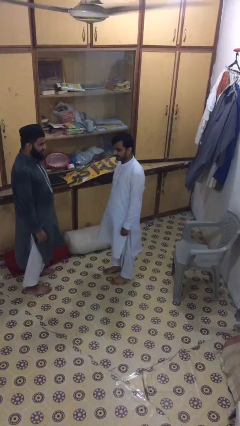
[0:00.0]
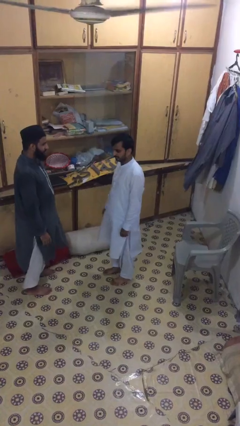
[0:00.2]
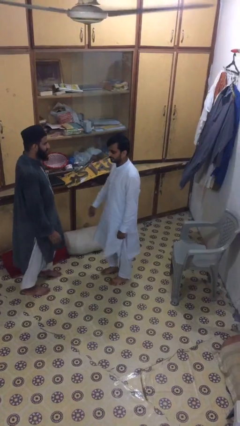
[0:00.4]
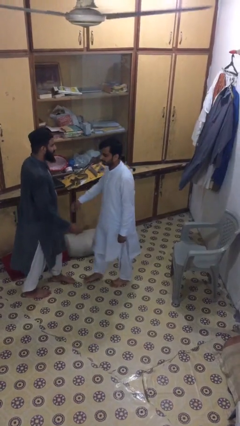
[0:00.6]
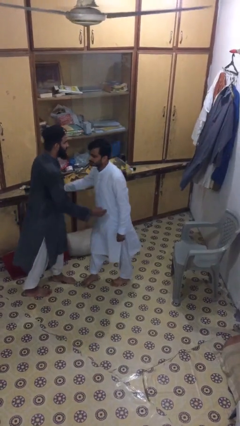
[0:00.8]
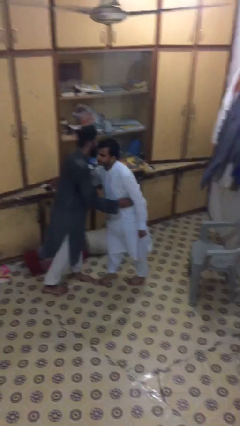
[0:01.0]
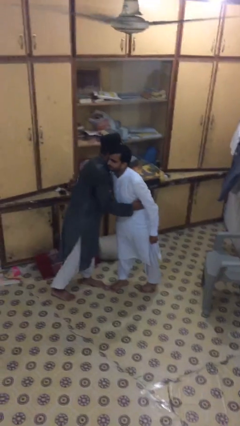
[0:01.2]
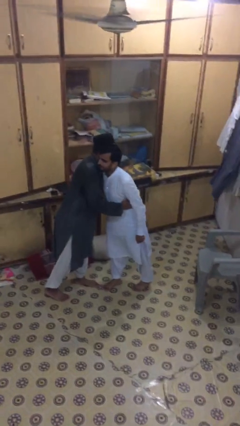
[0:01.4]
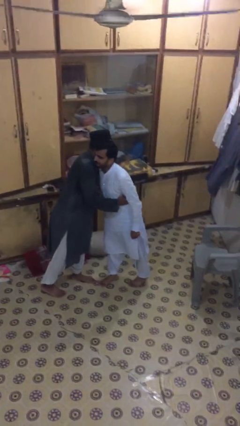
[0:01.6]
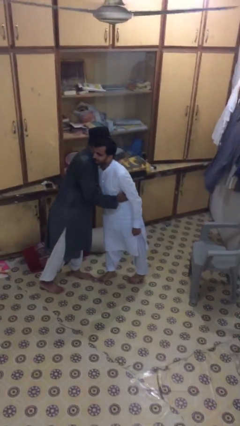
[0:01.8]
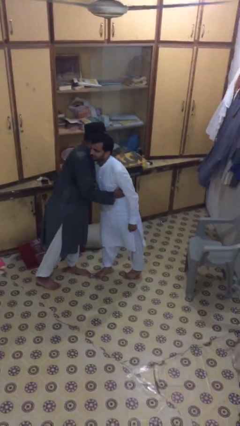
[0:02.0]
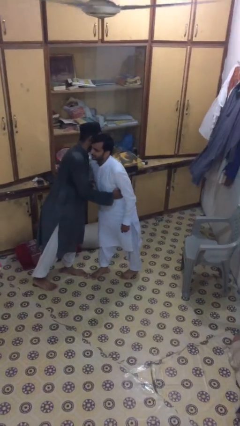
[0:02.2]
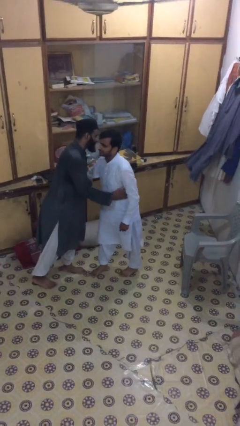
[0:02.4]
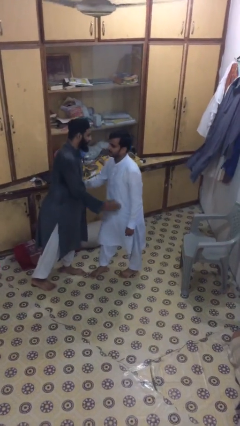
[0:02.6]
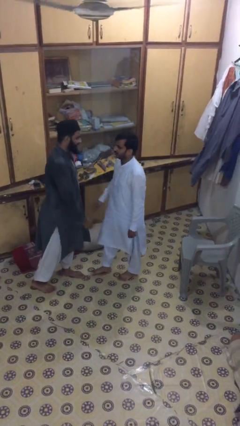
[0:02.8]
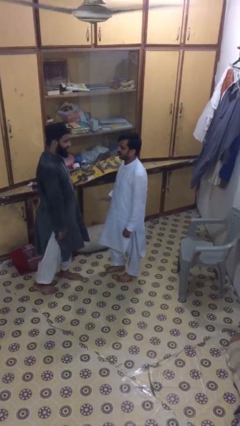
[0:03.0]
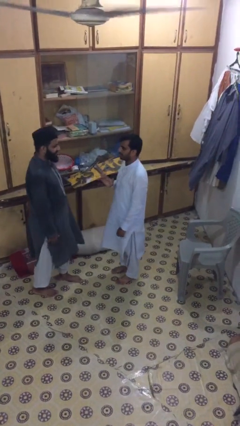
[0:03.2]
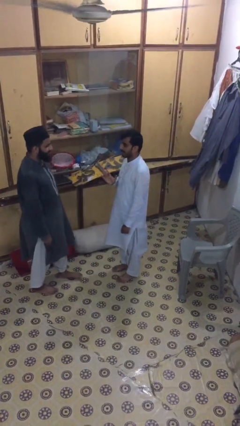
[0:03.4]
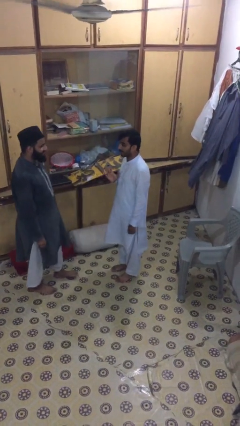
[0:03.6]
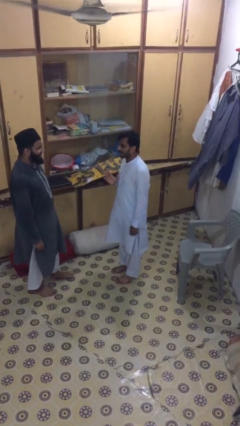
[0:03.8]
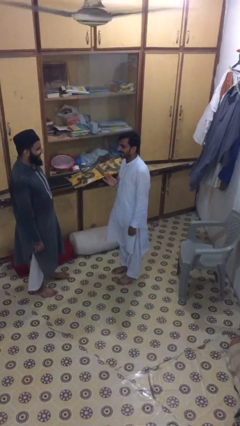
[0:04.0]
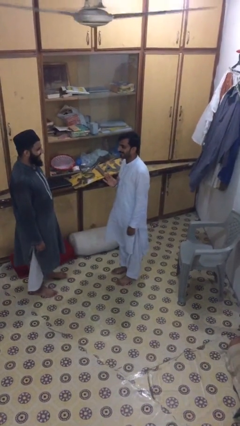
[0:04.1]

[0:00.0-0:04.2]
person embraces person

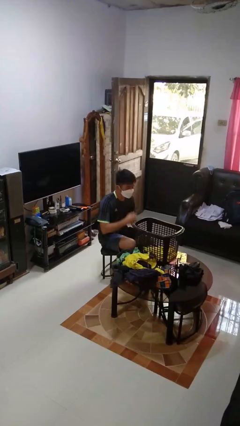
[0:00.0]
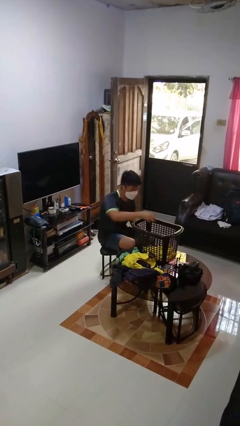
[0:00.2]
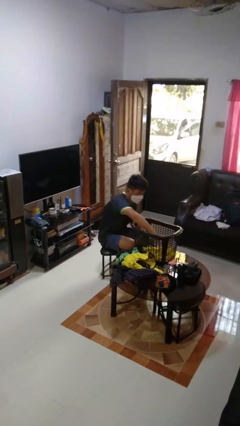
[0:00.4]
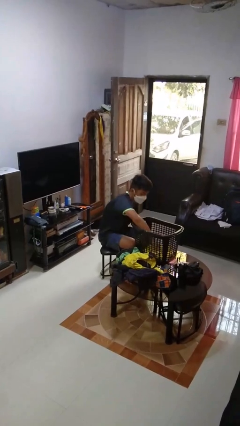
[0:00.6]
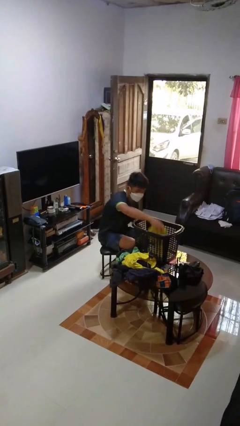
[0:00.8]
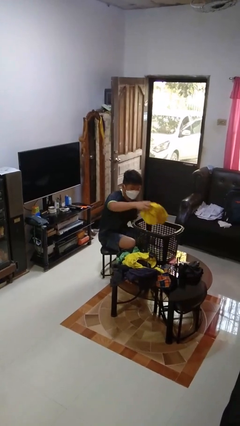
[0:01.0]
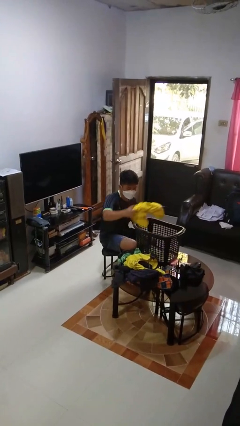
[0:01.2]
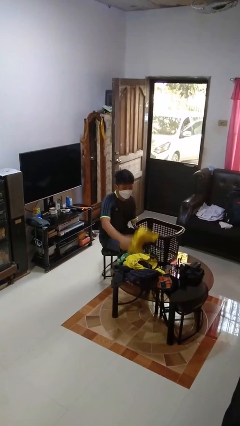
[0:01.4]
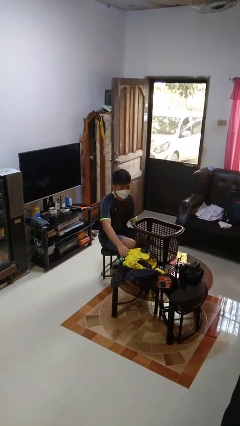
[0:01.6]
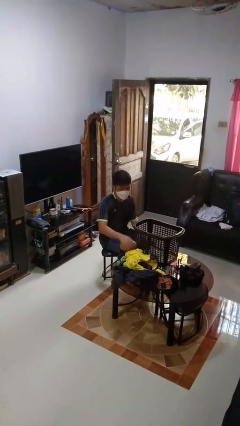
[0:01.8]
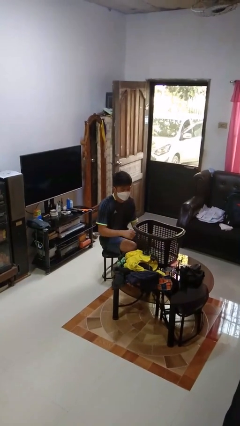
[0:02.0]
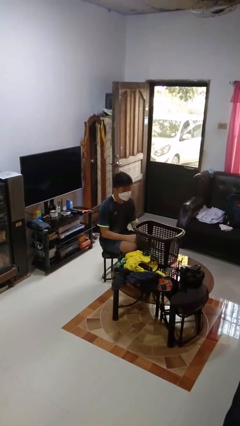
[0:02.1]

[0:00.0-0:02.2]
person takes object from basket

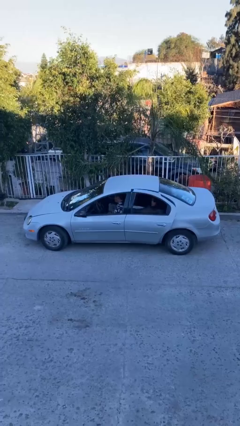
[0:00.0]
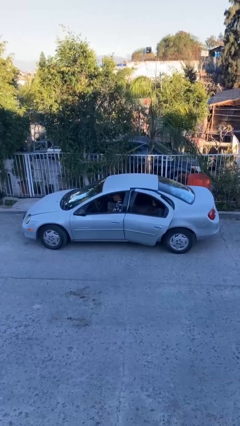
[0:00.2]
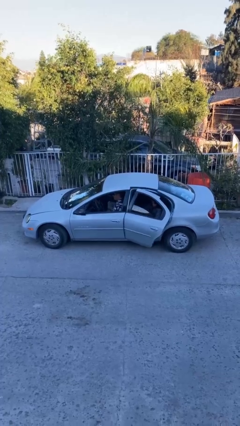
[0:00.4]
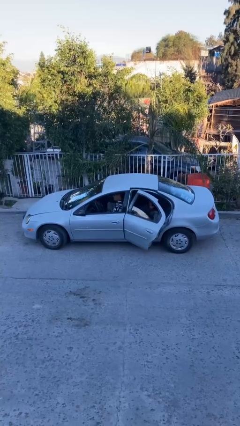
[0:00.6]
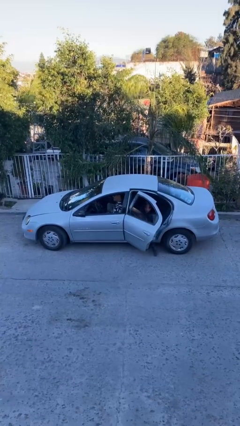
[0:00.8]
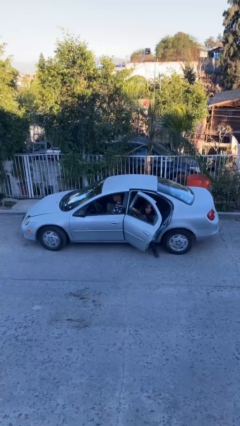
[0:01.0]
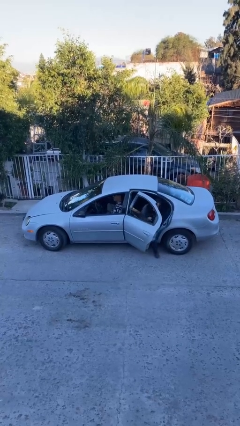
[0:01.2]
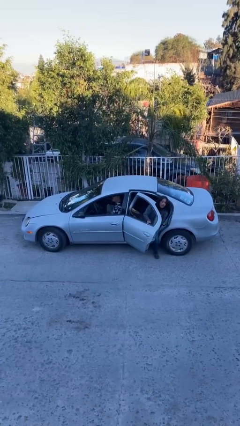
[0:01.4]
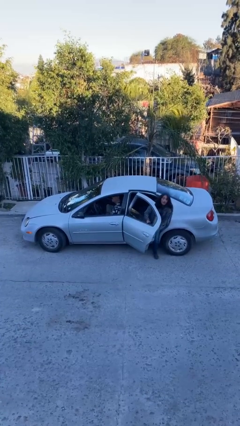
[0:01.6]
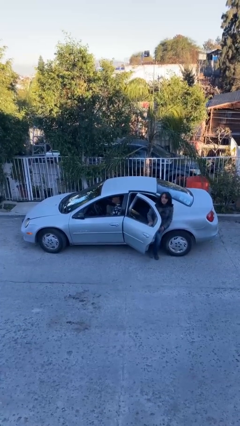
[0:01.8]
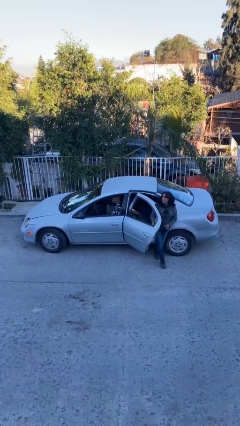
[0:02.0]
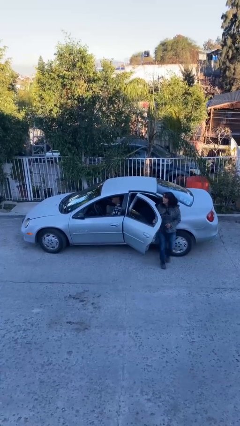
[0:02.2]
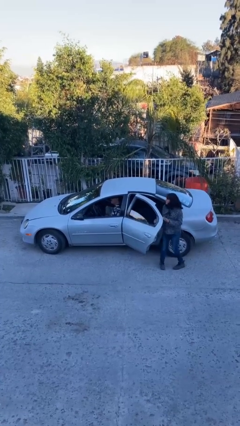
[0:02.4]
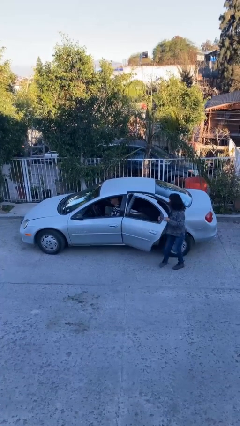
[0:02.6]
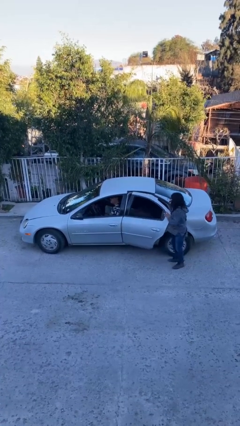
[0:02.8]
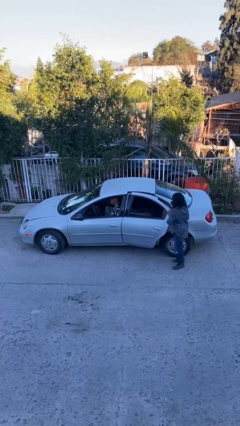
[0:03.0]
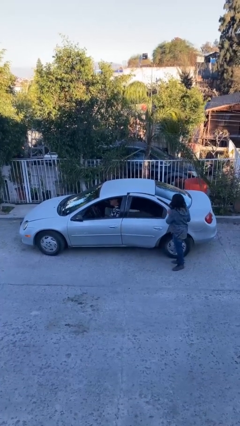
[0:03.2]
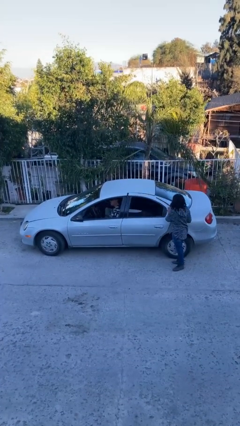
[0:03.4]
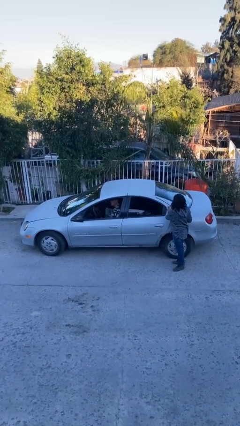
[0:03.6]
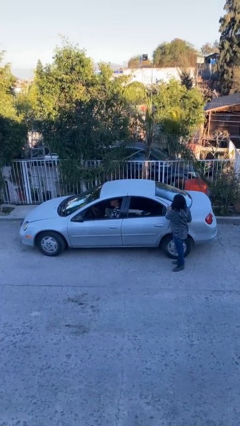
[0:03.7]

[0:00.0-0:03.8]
car drops off person

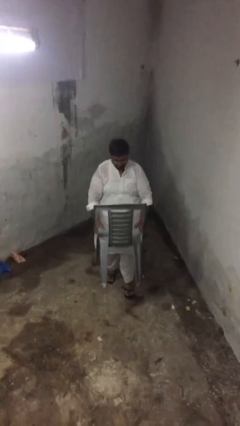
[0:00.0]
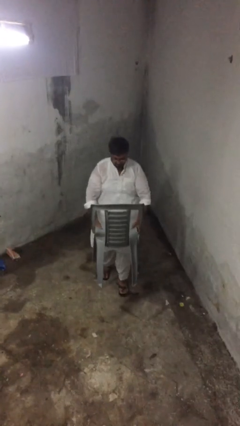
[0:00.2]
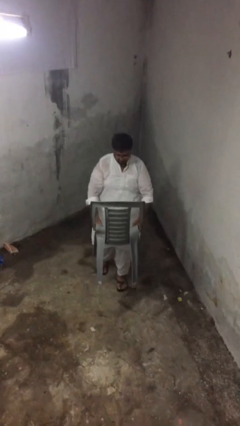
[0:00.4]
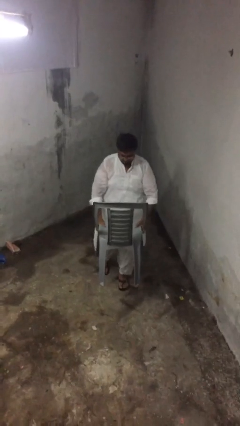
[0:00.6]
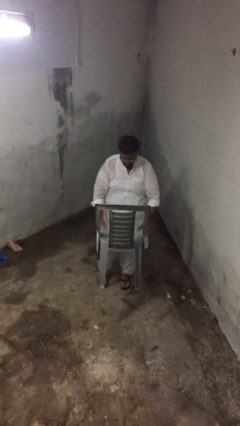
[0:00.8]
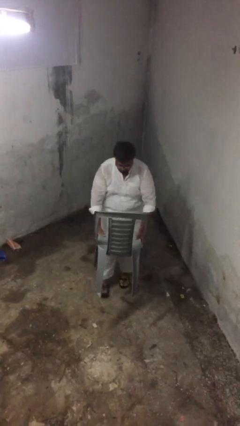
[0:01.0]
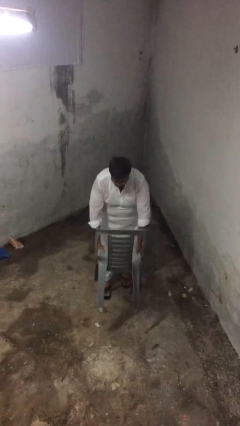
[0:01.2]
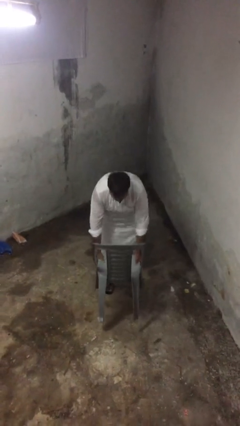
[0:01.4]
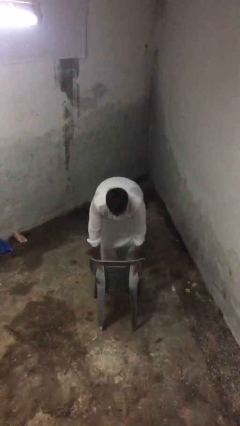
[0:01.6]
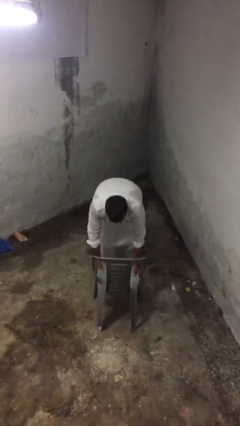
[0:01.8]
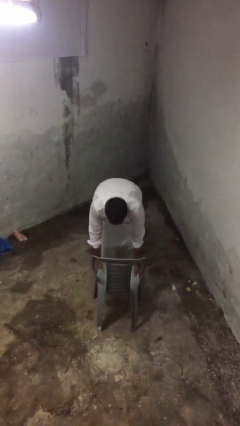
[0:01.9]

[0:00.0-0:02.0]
person puts down object on floor

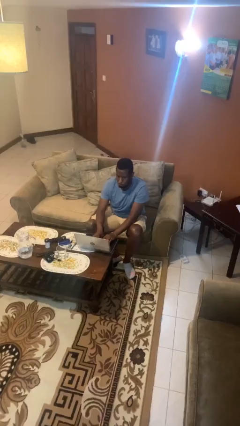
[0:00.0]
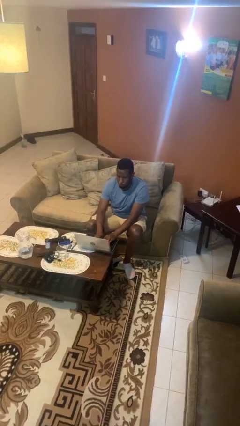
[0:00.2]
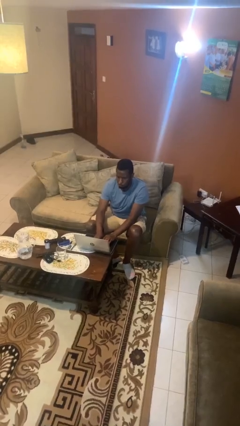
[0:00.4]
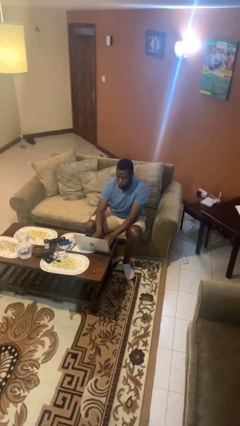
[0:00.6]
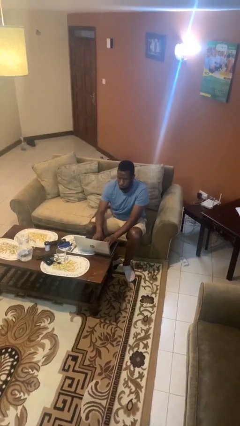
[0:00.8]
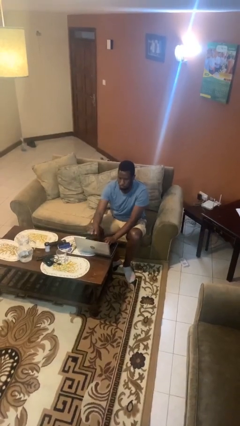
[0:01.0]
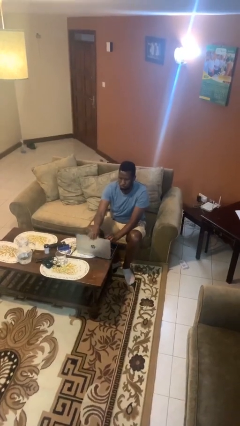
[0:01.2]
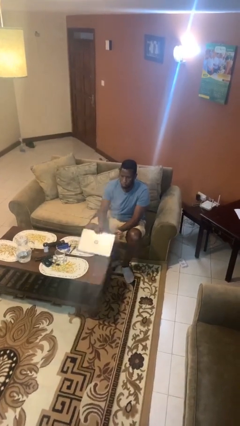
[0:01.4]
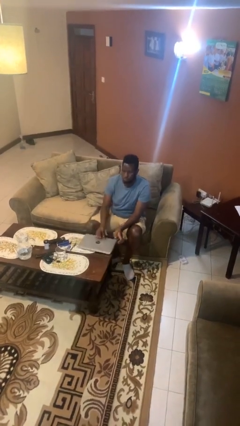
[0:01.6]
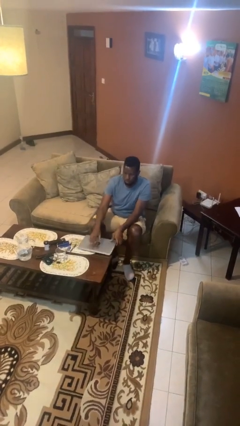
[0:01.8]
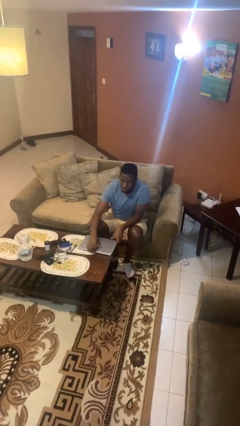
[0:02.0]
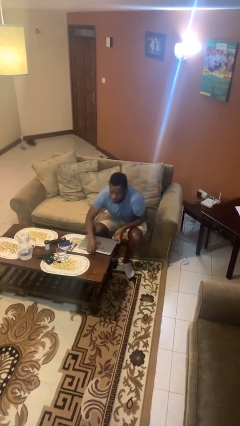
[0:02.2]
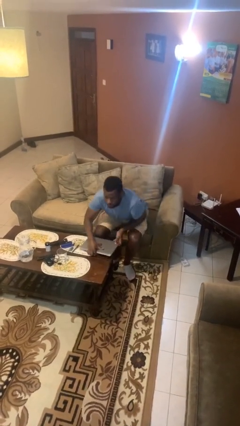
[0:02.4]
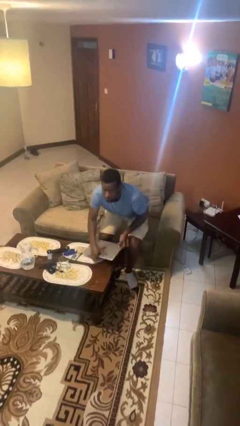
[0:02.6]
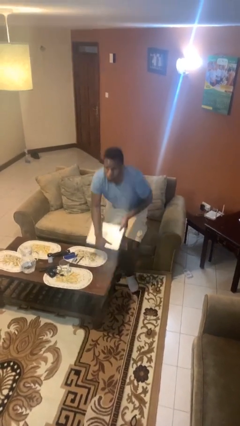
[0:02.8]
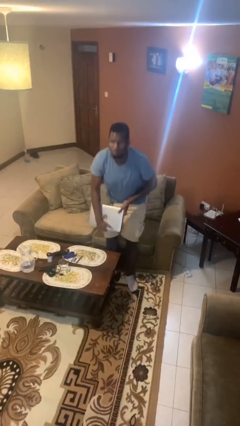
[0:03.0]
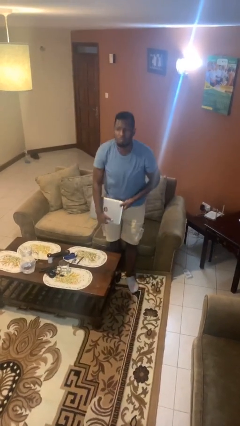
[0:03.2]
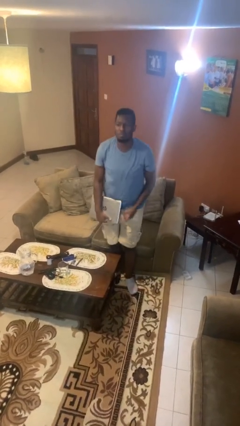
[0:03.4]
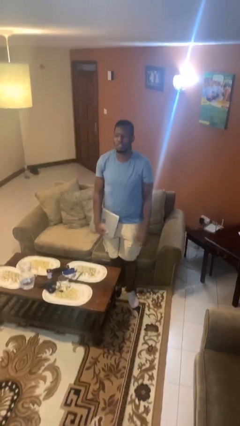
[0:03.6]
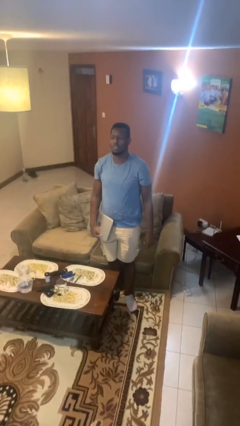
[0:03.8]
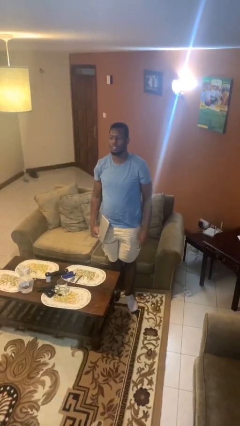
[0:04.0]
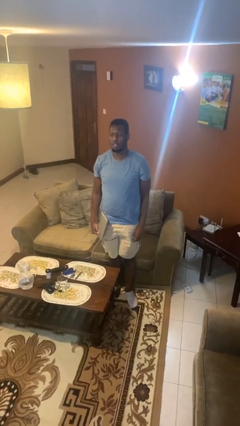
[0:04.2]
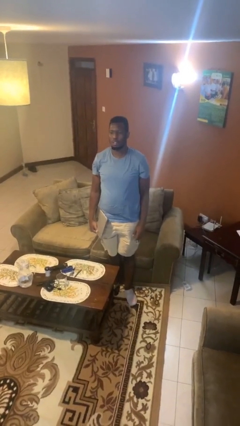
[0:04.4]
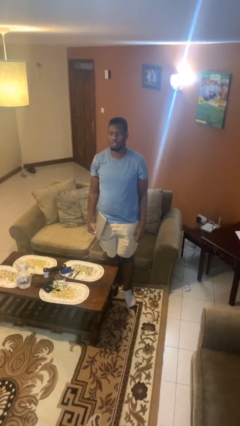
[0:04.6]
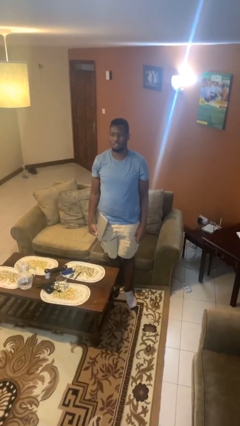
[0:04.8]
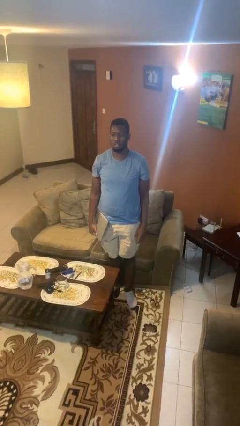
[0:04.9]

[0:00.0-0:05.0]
person stands up

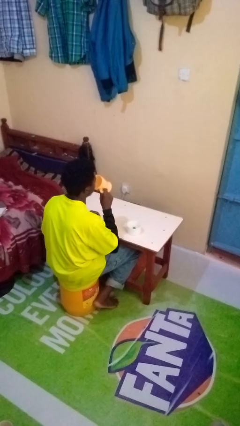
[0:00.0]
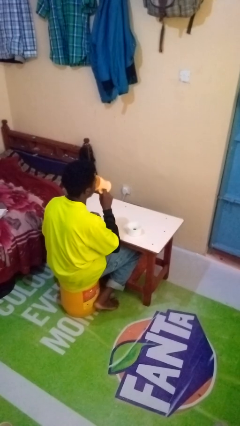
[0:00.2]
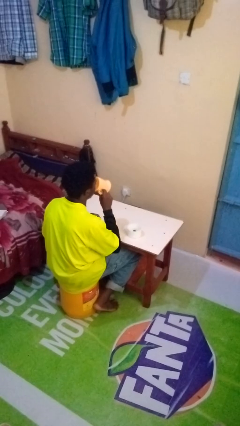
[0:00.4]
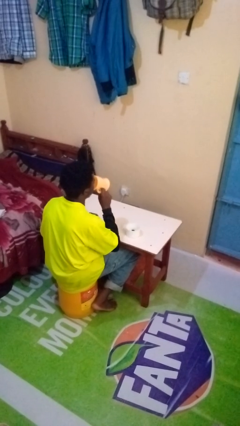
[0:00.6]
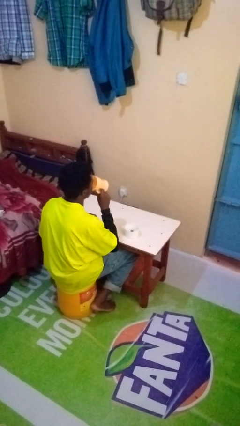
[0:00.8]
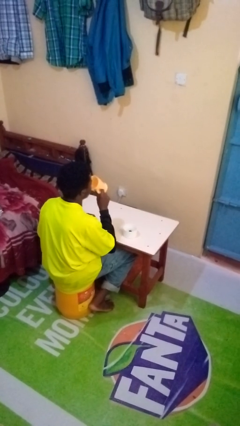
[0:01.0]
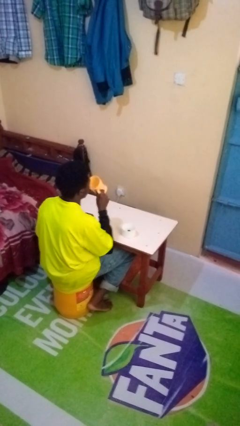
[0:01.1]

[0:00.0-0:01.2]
person drinks from cup
